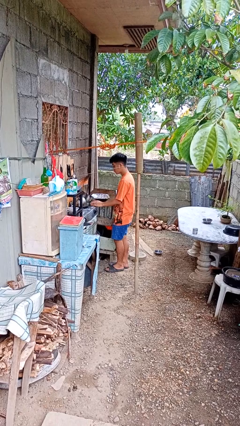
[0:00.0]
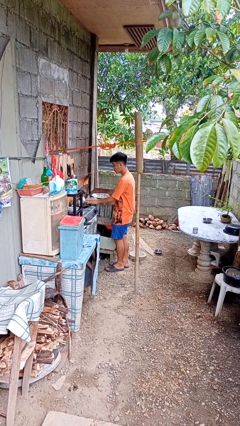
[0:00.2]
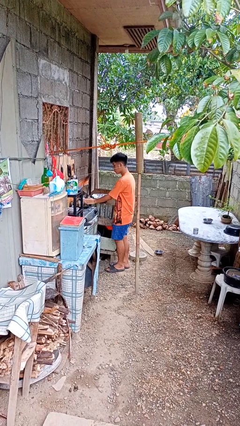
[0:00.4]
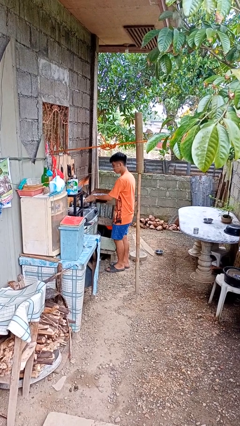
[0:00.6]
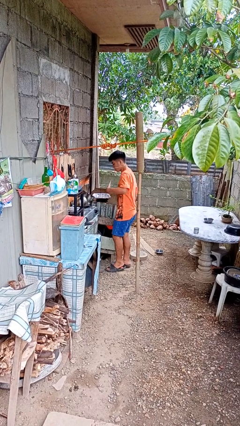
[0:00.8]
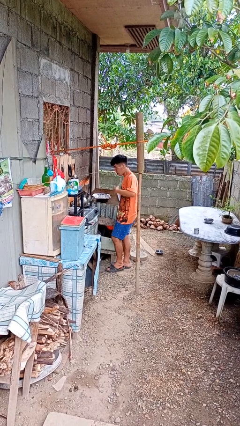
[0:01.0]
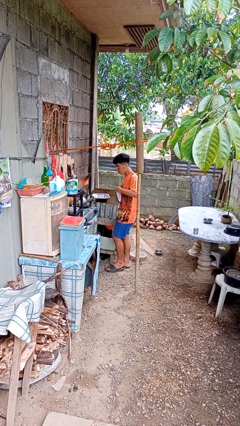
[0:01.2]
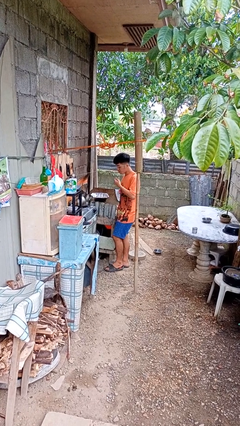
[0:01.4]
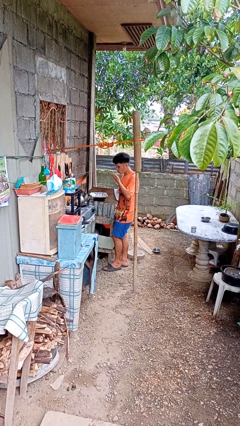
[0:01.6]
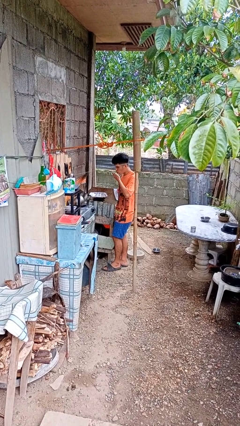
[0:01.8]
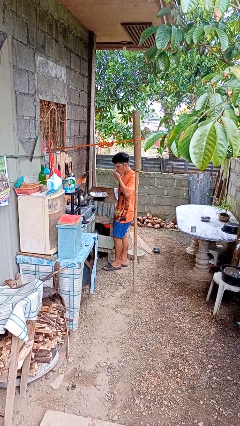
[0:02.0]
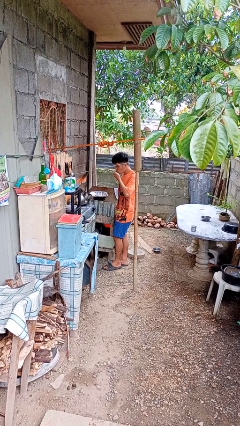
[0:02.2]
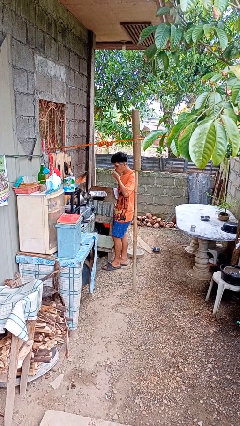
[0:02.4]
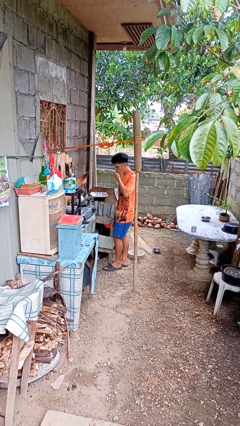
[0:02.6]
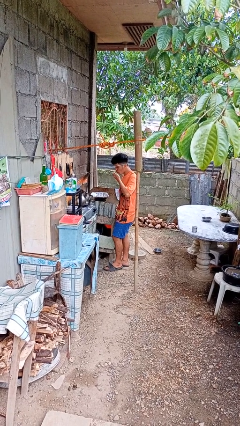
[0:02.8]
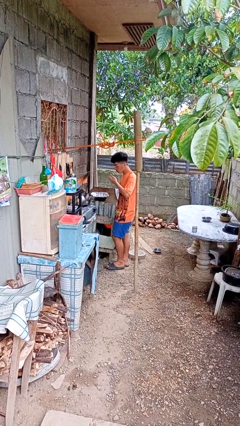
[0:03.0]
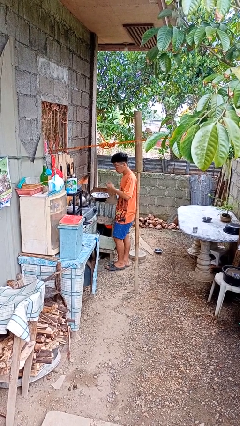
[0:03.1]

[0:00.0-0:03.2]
person burns hand

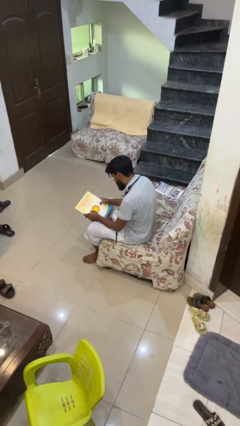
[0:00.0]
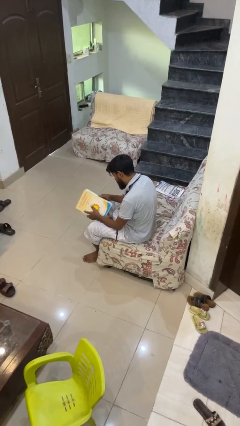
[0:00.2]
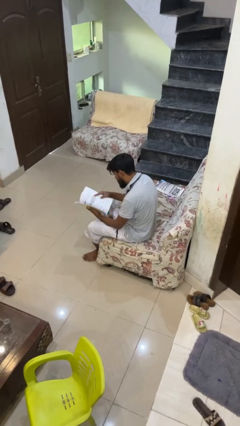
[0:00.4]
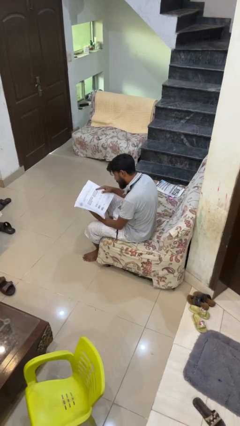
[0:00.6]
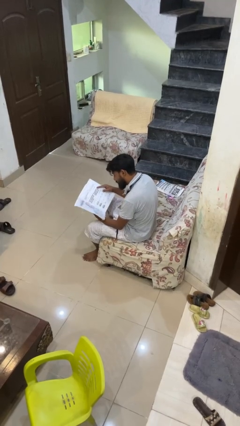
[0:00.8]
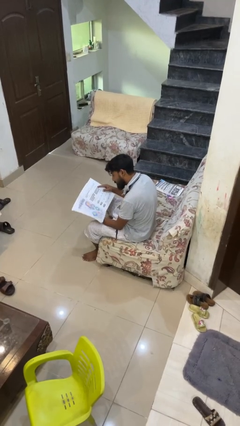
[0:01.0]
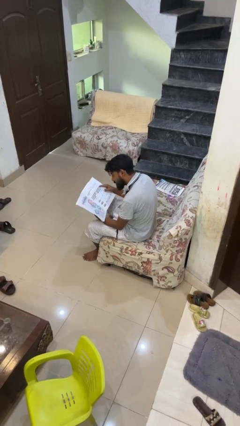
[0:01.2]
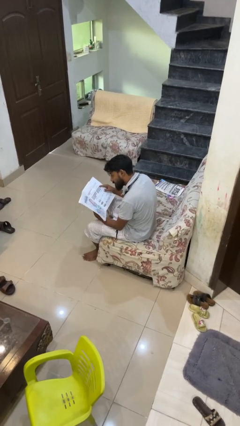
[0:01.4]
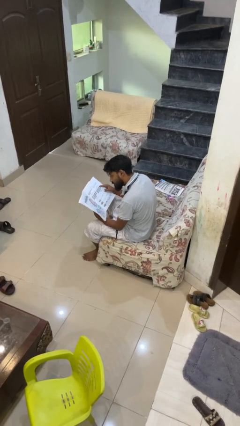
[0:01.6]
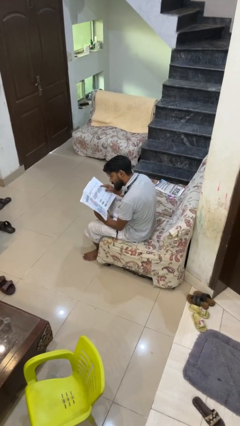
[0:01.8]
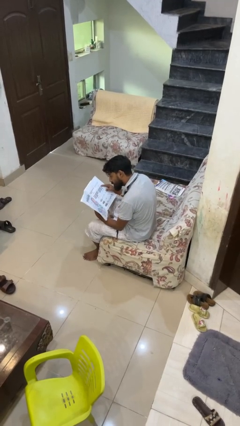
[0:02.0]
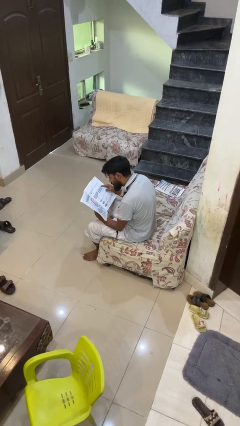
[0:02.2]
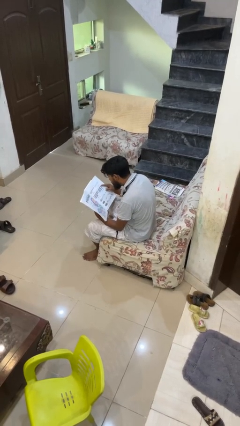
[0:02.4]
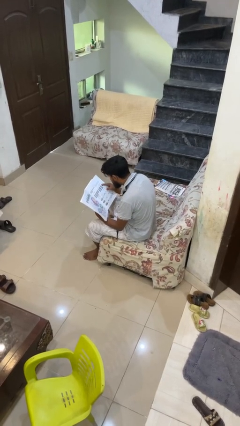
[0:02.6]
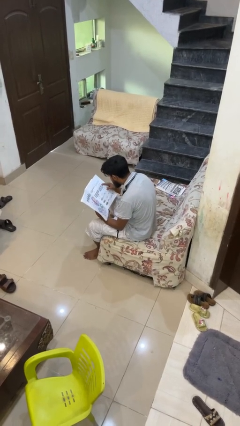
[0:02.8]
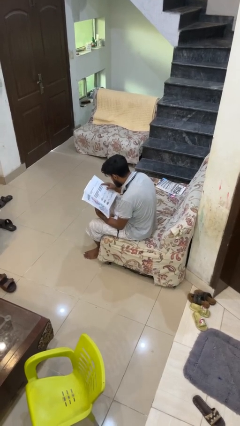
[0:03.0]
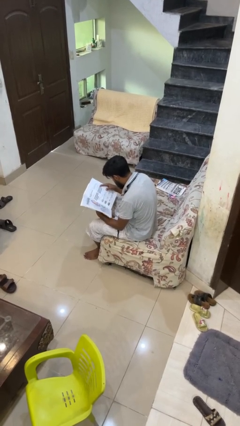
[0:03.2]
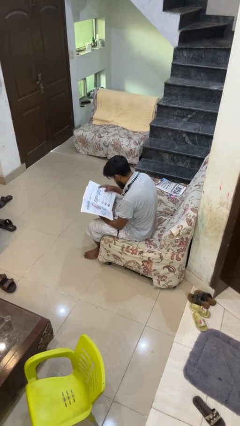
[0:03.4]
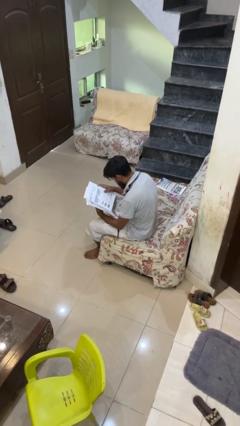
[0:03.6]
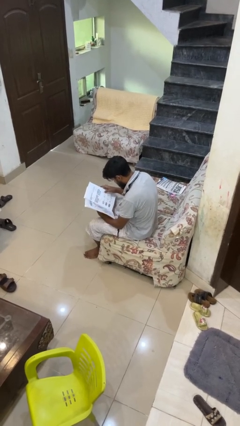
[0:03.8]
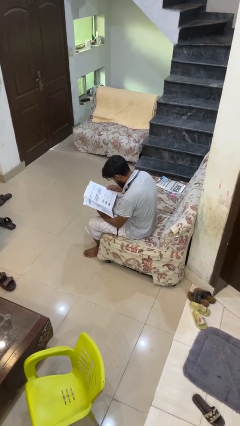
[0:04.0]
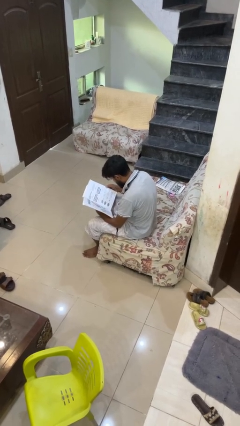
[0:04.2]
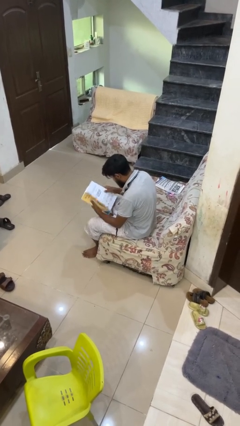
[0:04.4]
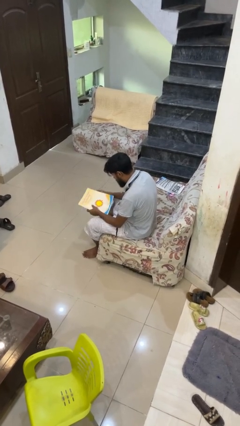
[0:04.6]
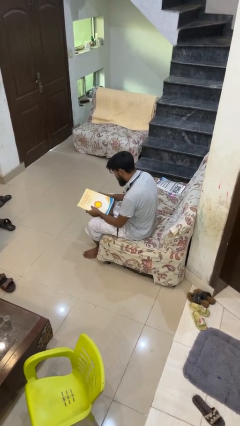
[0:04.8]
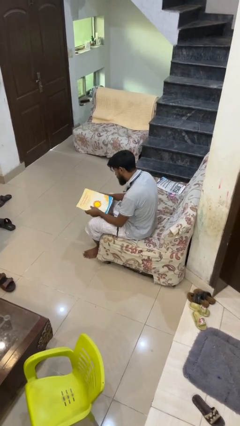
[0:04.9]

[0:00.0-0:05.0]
person reads book

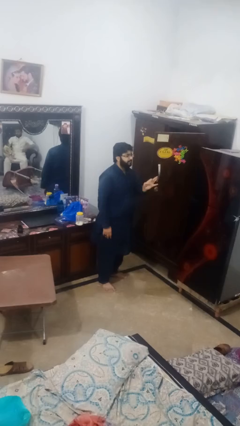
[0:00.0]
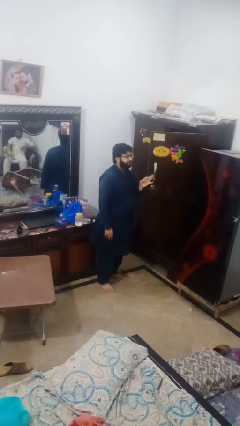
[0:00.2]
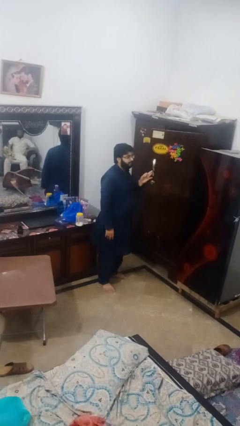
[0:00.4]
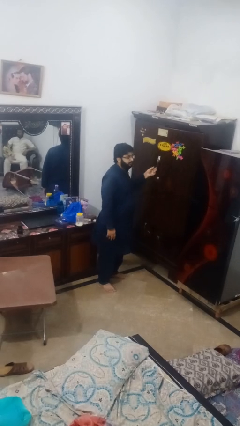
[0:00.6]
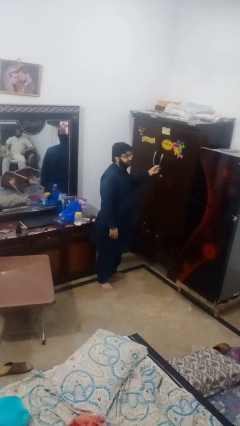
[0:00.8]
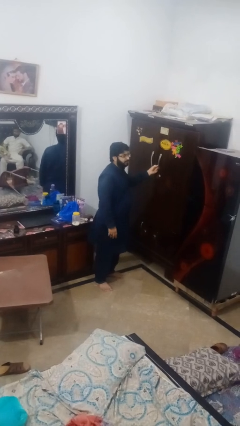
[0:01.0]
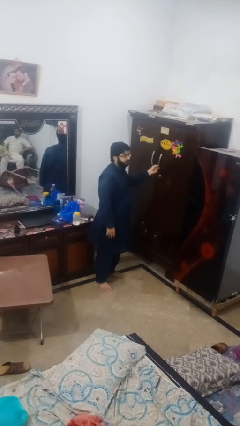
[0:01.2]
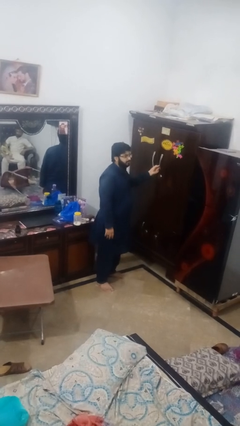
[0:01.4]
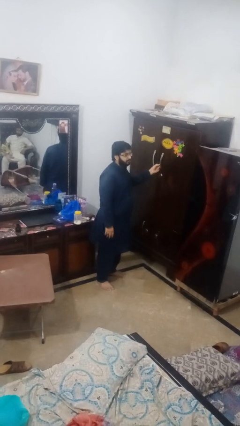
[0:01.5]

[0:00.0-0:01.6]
person closes closet door

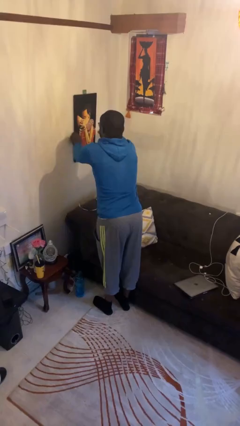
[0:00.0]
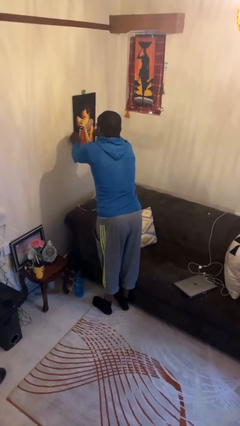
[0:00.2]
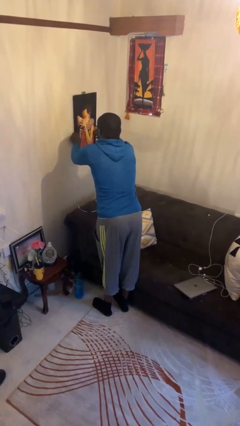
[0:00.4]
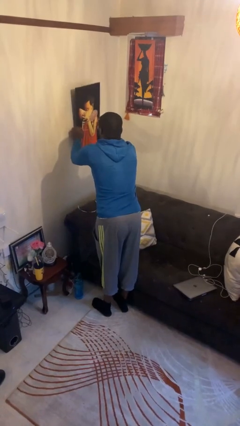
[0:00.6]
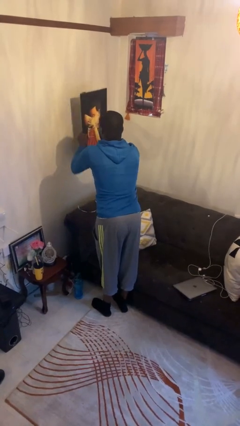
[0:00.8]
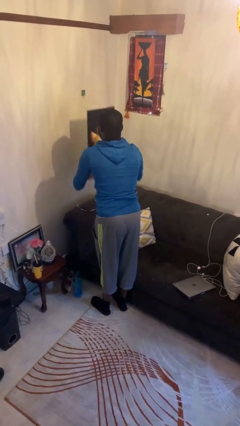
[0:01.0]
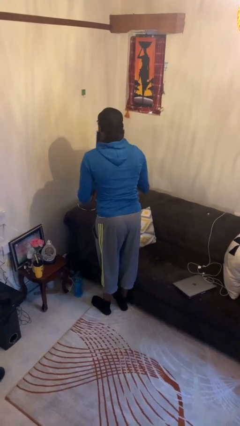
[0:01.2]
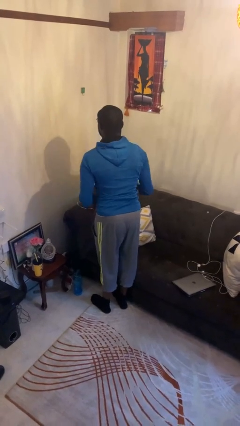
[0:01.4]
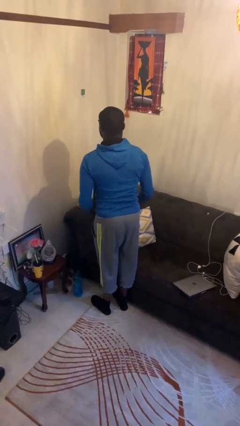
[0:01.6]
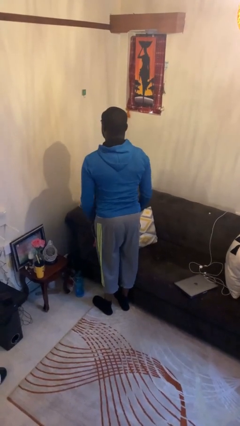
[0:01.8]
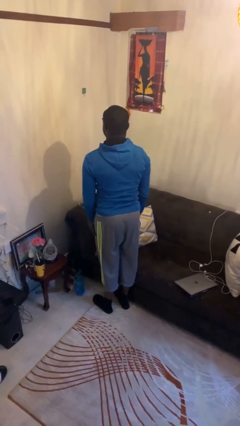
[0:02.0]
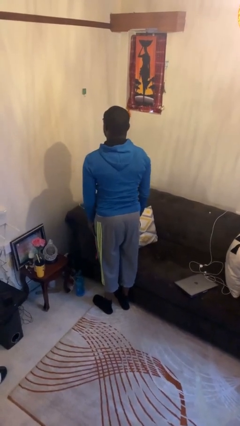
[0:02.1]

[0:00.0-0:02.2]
person takes down picture frame

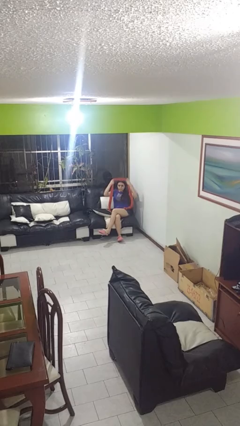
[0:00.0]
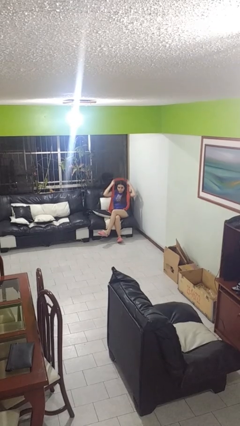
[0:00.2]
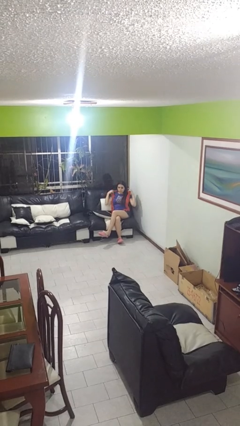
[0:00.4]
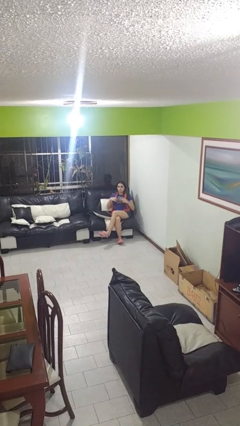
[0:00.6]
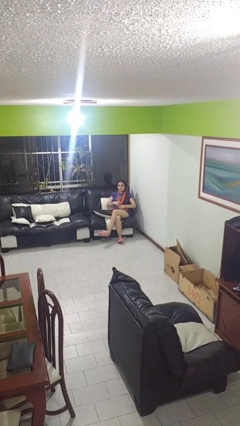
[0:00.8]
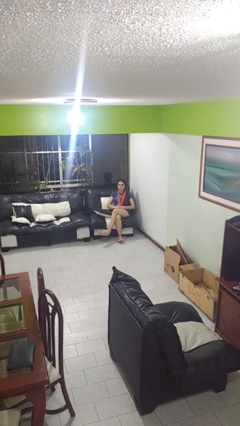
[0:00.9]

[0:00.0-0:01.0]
person puts on scarf

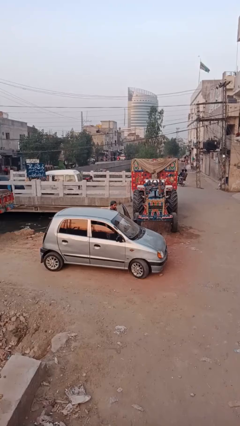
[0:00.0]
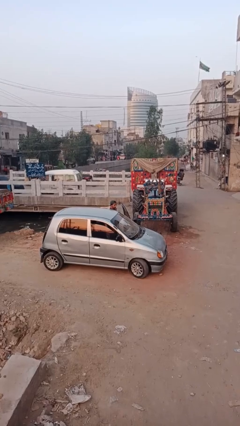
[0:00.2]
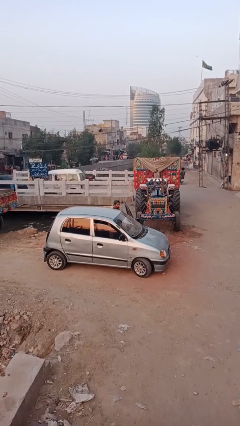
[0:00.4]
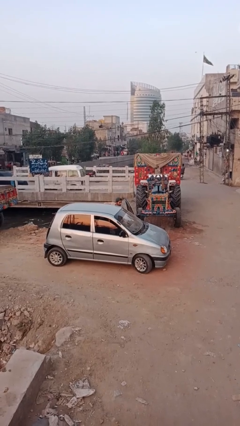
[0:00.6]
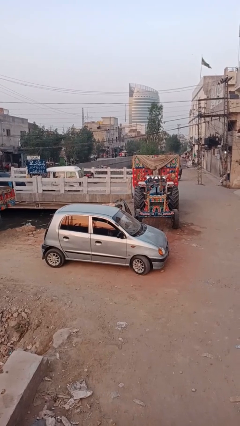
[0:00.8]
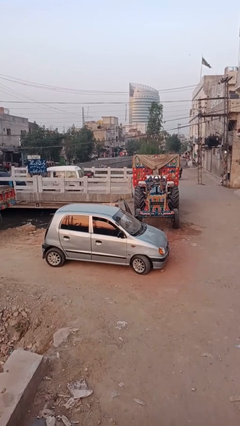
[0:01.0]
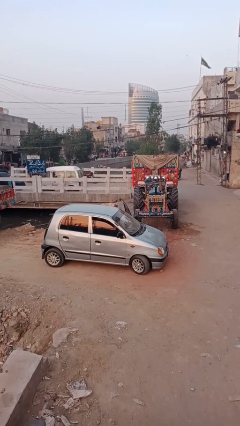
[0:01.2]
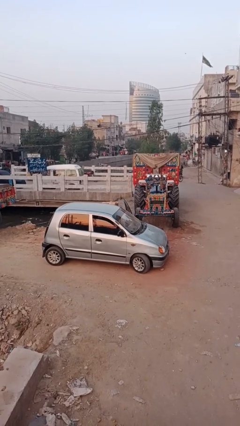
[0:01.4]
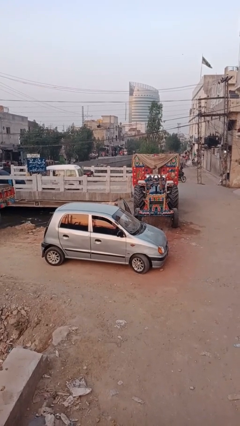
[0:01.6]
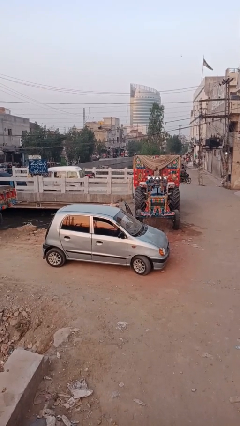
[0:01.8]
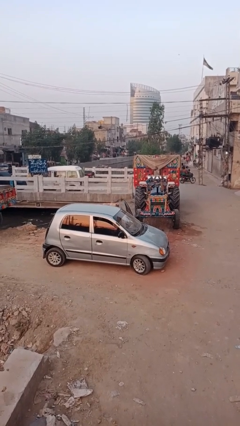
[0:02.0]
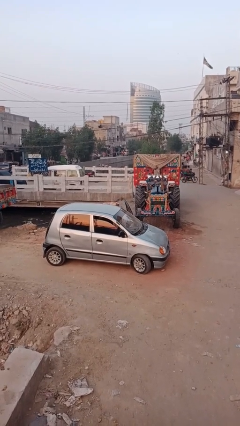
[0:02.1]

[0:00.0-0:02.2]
person enters car

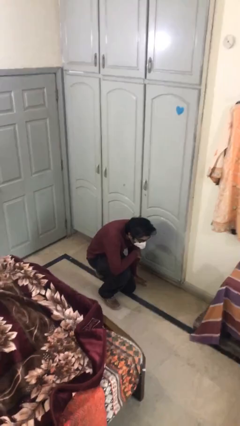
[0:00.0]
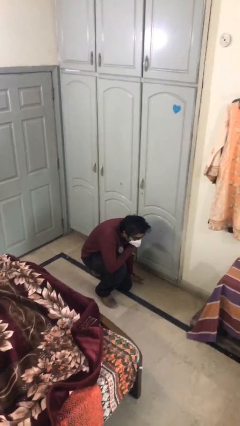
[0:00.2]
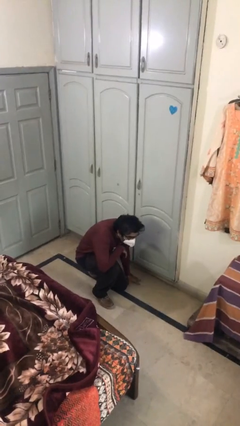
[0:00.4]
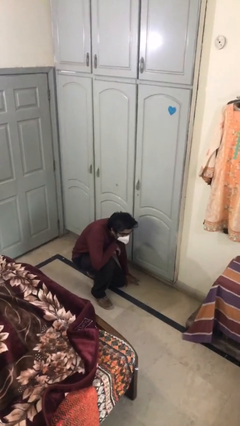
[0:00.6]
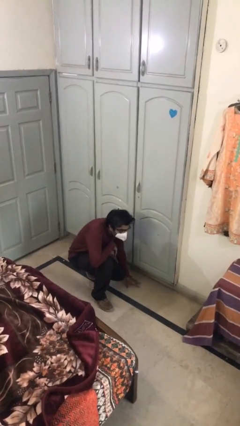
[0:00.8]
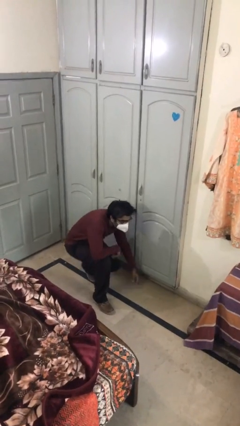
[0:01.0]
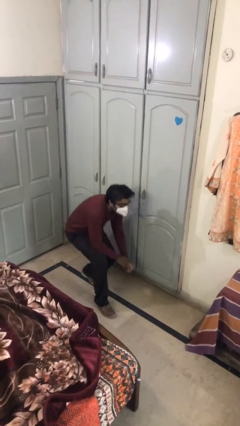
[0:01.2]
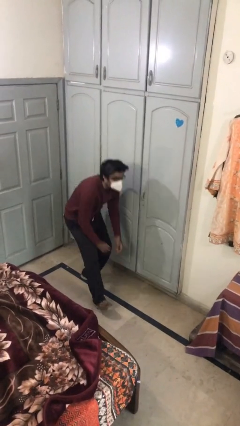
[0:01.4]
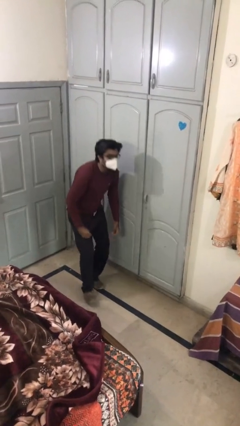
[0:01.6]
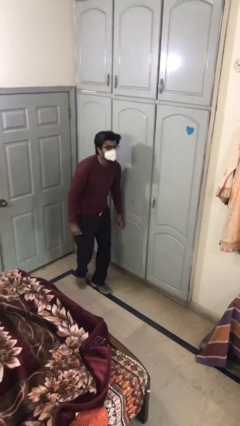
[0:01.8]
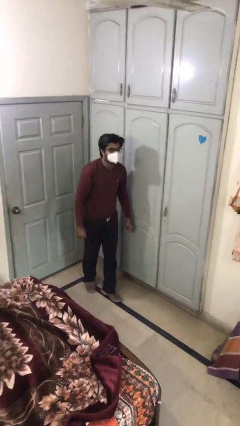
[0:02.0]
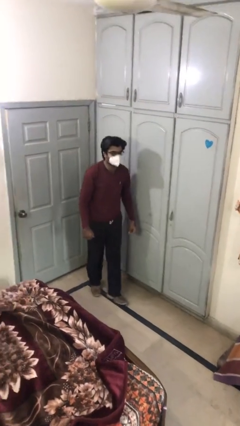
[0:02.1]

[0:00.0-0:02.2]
person stands up
